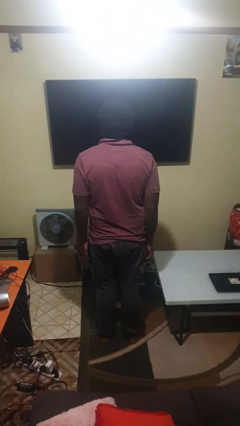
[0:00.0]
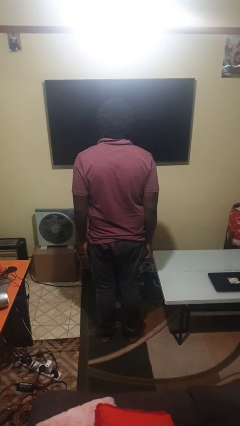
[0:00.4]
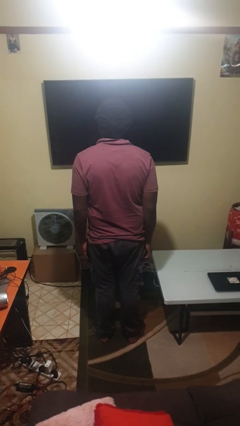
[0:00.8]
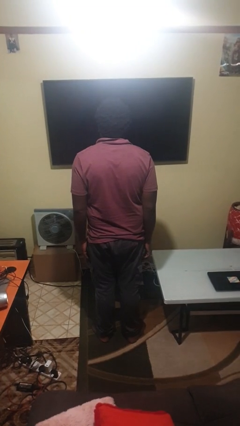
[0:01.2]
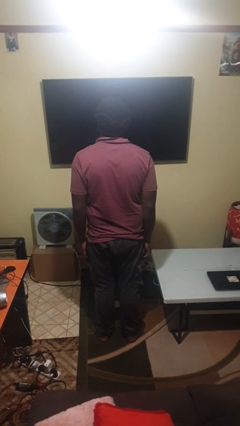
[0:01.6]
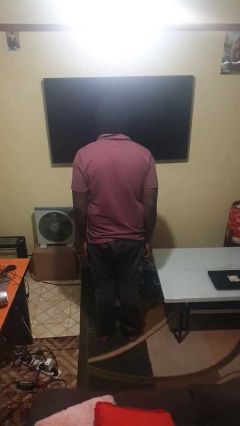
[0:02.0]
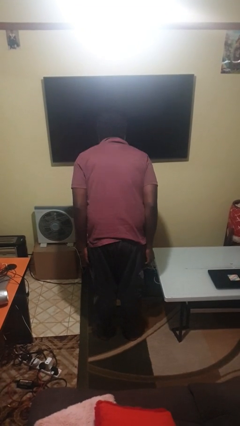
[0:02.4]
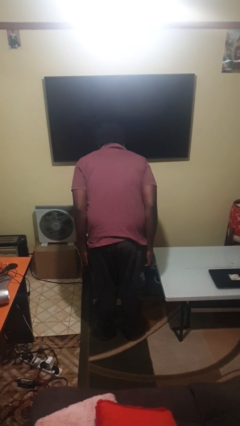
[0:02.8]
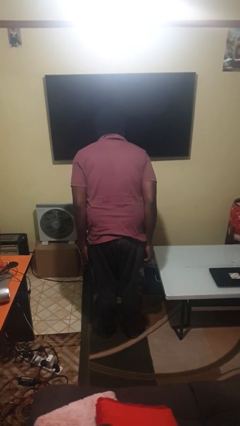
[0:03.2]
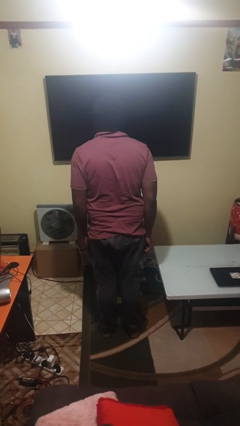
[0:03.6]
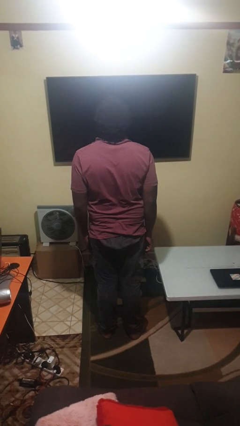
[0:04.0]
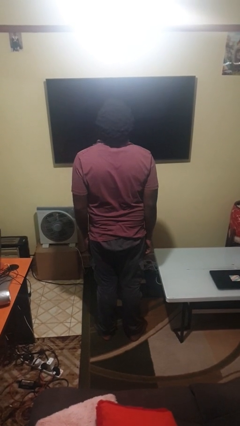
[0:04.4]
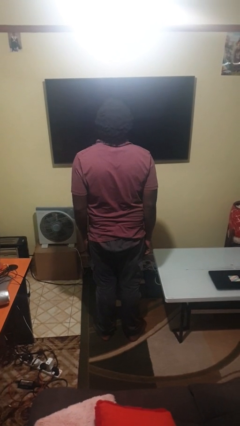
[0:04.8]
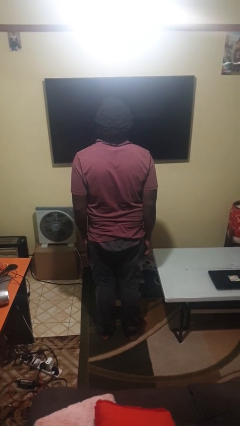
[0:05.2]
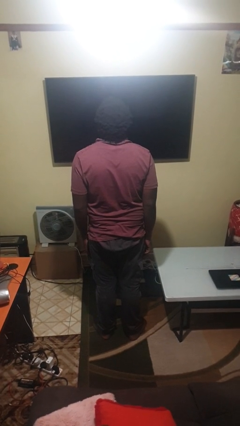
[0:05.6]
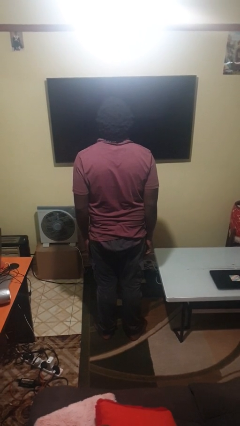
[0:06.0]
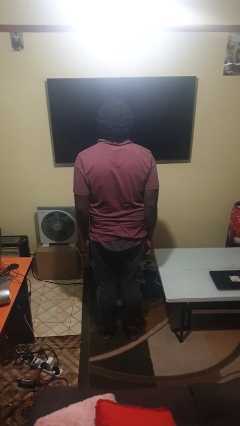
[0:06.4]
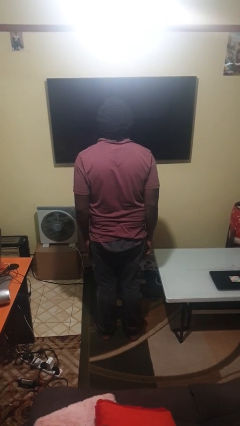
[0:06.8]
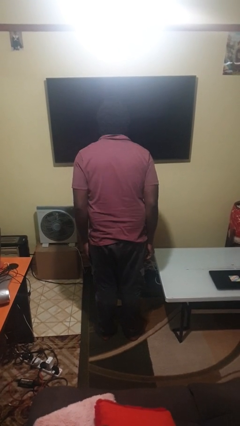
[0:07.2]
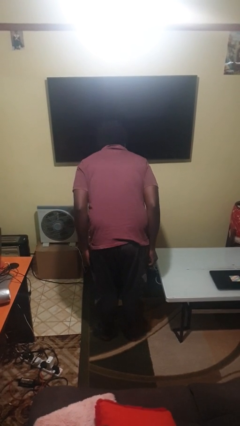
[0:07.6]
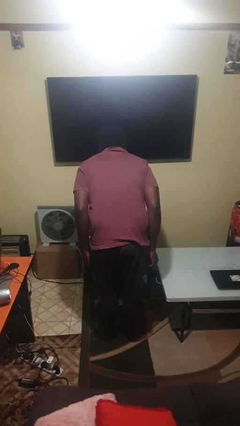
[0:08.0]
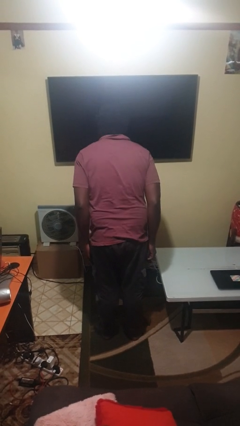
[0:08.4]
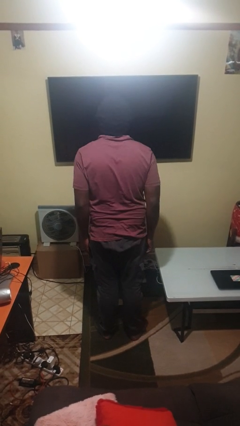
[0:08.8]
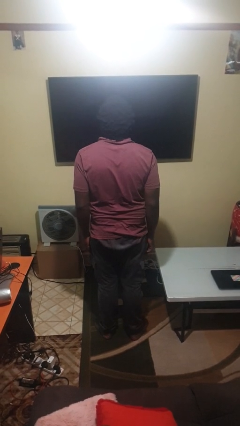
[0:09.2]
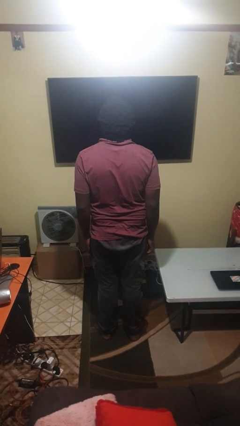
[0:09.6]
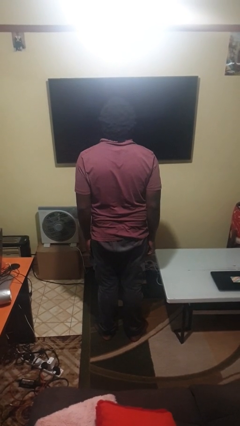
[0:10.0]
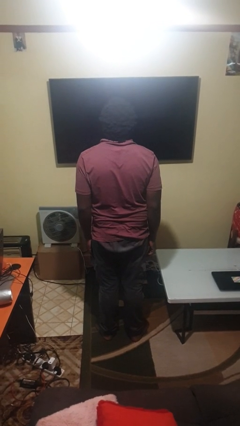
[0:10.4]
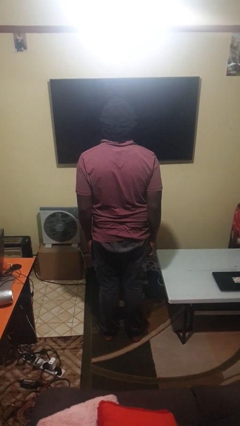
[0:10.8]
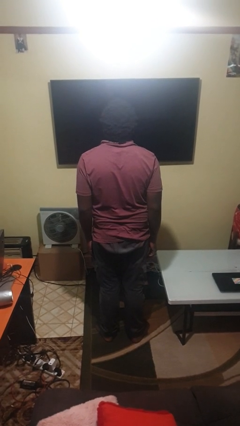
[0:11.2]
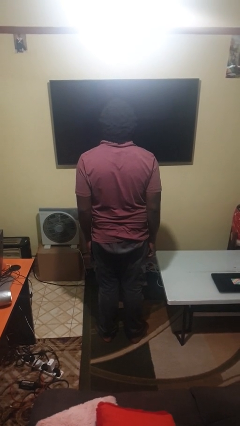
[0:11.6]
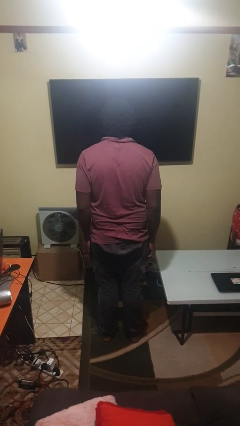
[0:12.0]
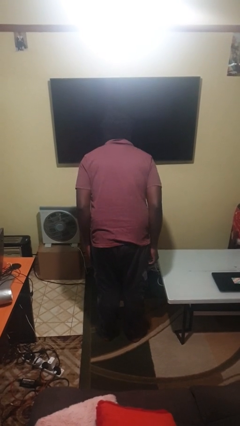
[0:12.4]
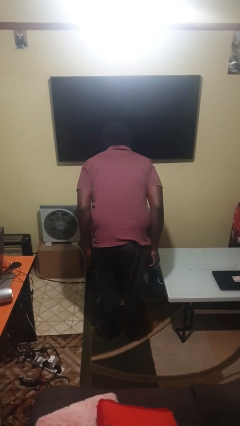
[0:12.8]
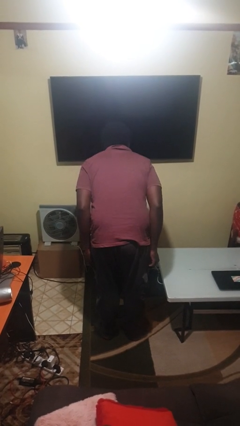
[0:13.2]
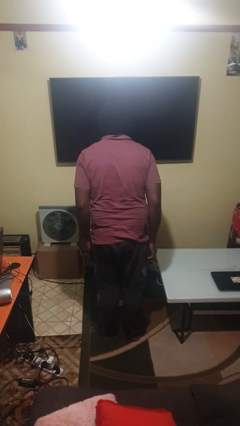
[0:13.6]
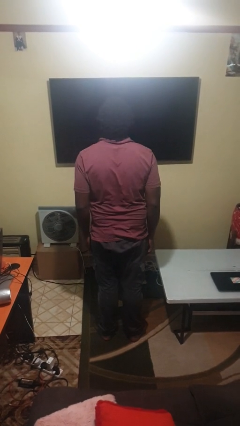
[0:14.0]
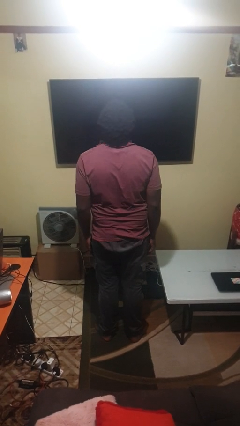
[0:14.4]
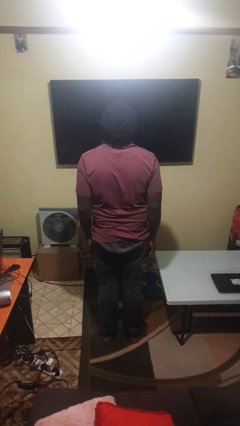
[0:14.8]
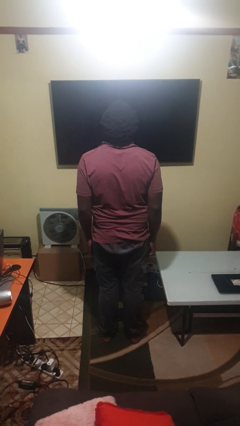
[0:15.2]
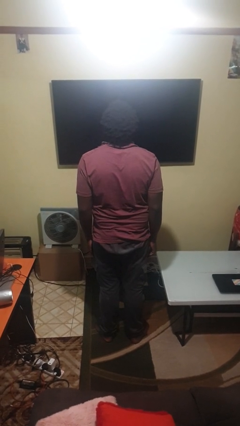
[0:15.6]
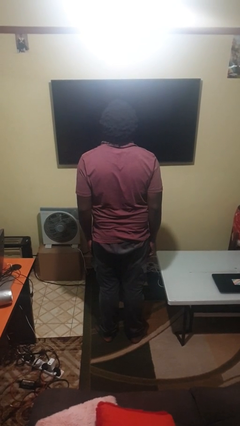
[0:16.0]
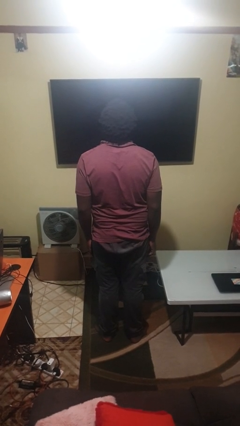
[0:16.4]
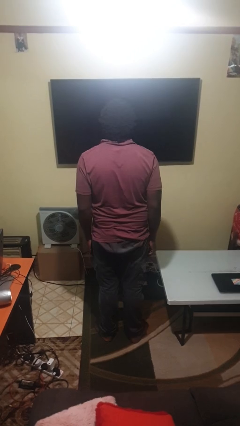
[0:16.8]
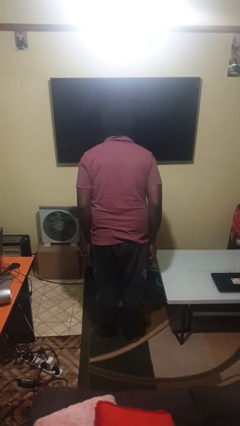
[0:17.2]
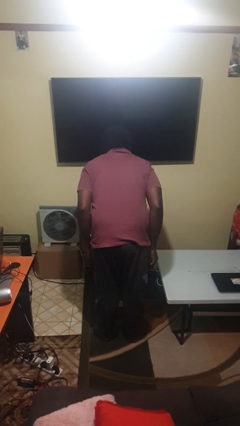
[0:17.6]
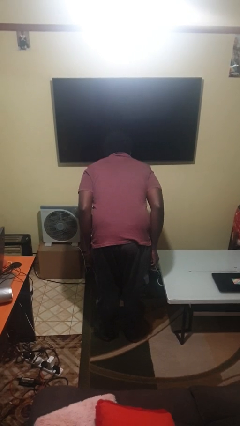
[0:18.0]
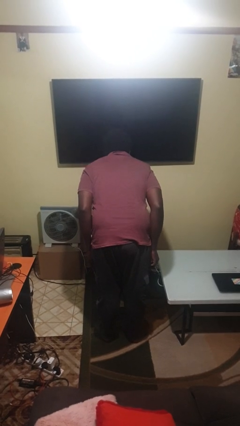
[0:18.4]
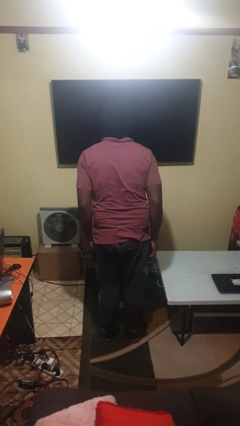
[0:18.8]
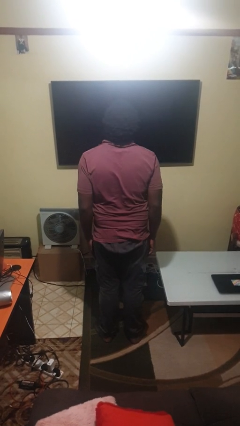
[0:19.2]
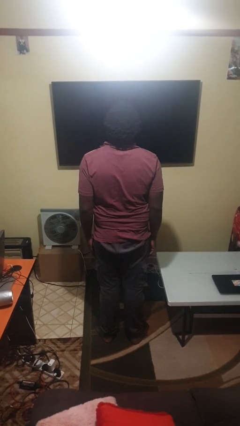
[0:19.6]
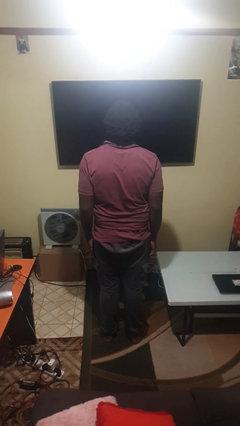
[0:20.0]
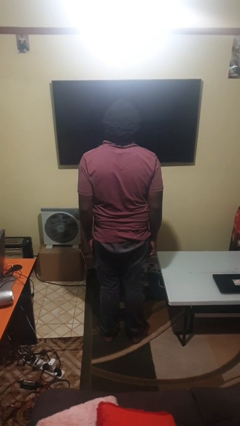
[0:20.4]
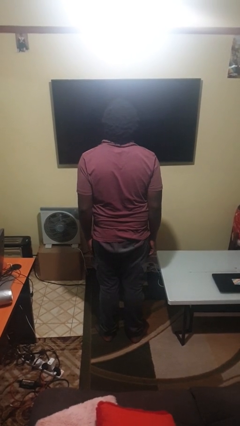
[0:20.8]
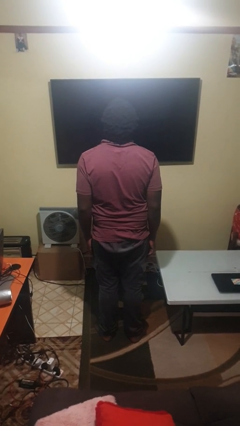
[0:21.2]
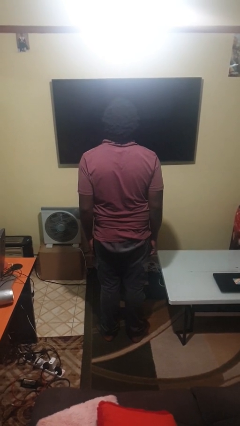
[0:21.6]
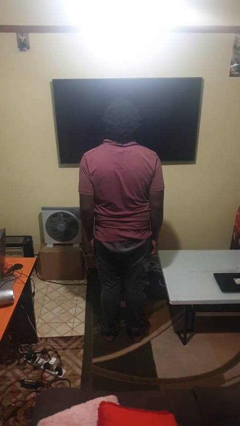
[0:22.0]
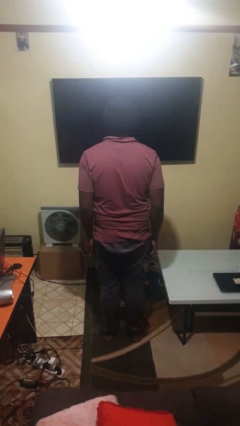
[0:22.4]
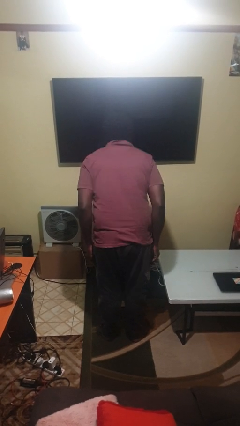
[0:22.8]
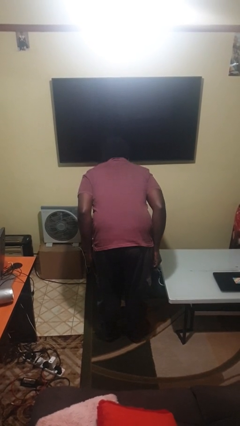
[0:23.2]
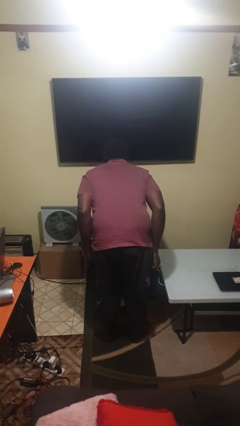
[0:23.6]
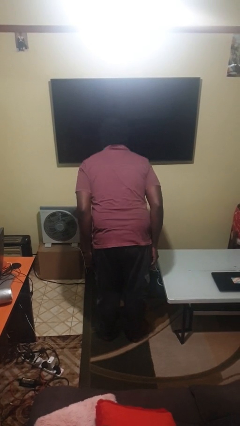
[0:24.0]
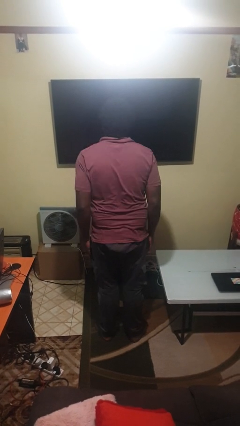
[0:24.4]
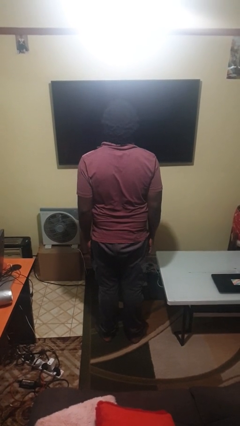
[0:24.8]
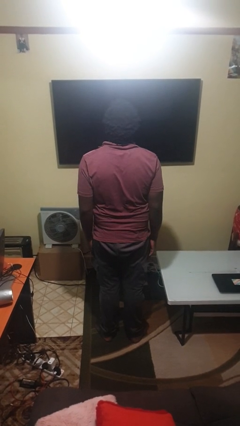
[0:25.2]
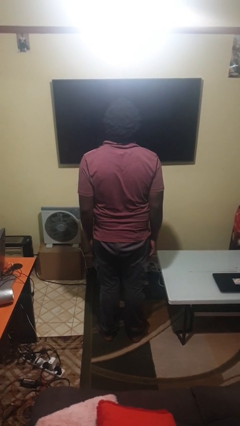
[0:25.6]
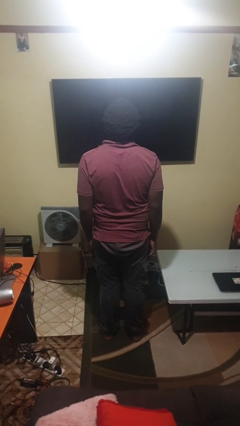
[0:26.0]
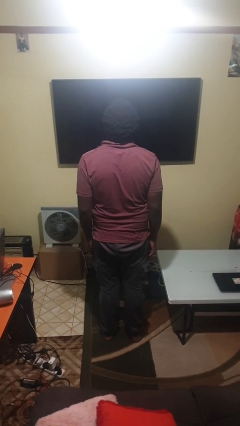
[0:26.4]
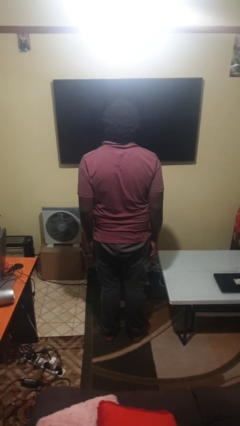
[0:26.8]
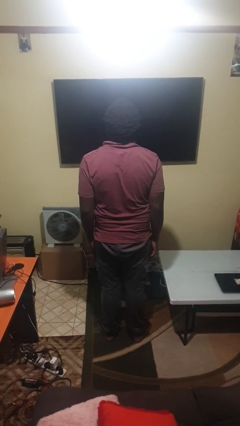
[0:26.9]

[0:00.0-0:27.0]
person bows

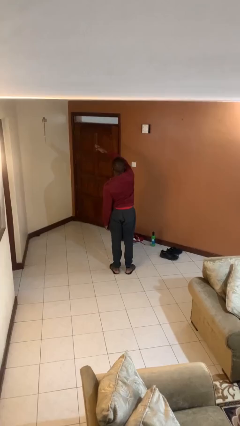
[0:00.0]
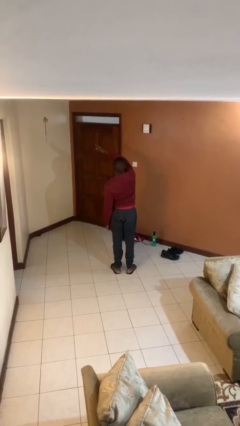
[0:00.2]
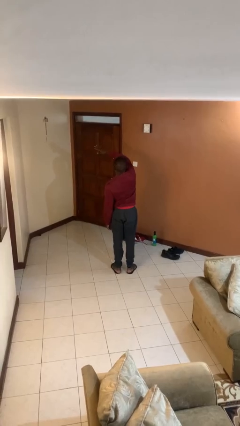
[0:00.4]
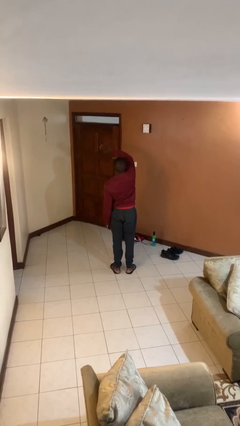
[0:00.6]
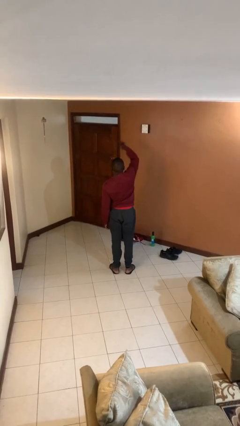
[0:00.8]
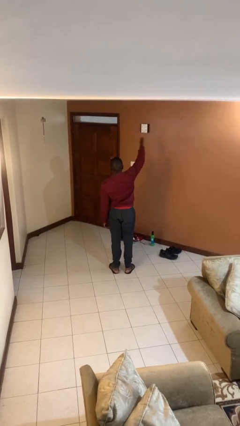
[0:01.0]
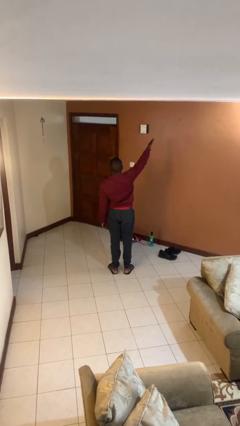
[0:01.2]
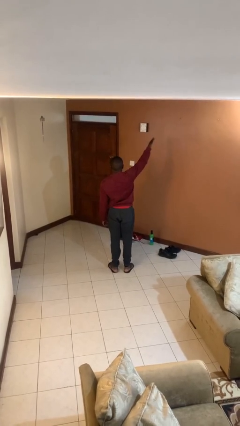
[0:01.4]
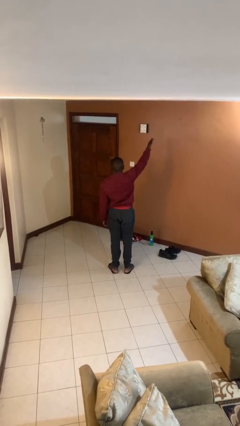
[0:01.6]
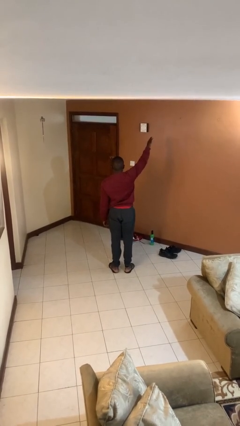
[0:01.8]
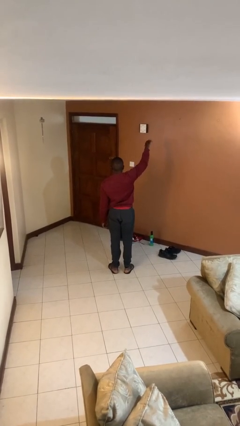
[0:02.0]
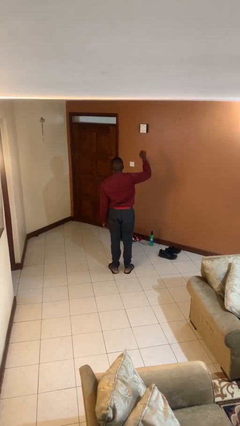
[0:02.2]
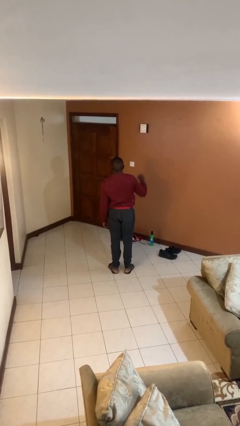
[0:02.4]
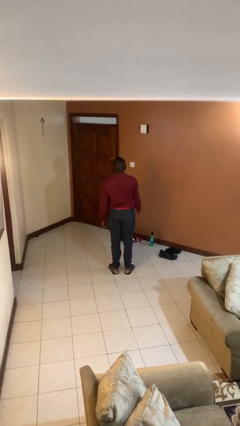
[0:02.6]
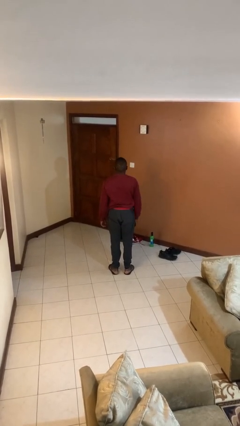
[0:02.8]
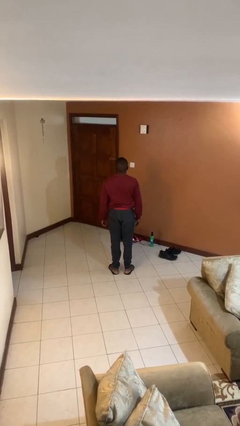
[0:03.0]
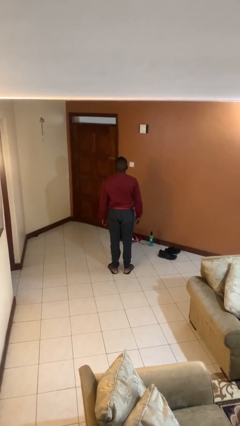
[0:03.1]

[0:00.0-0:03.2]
person gestures swipe right

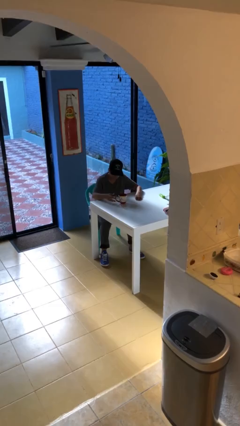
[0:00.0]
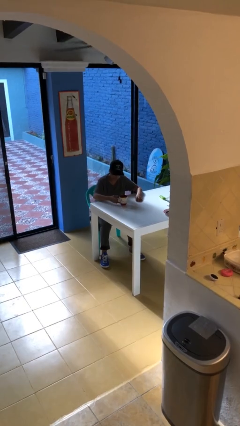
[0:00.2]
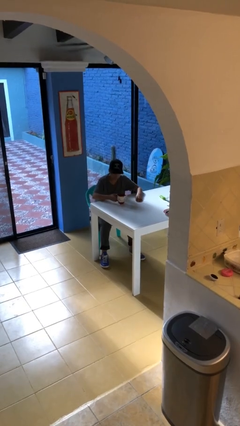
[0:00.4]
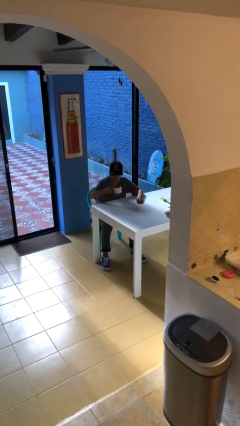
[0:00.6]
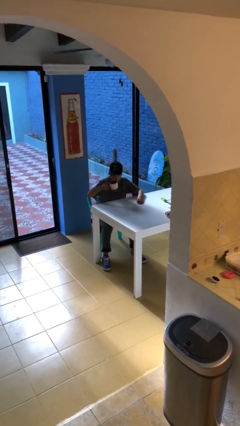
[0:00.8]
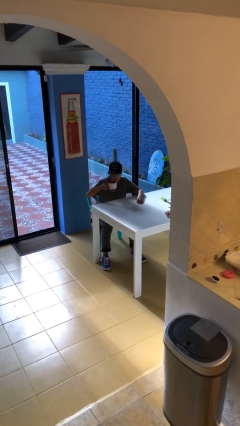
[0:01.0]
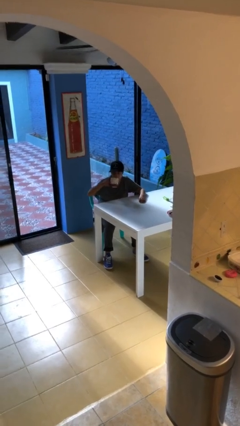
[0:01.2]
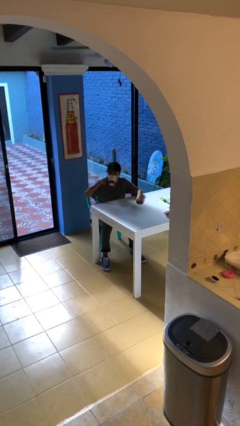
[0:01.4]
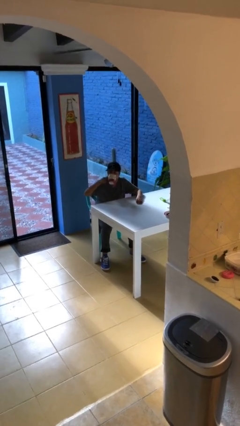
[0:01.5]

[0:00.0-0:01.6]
person picks up object from table
